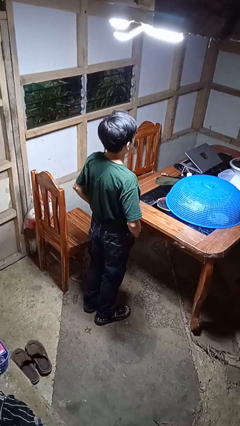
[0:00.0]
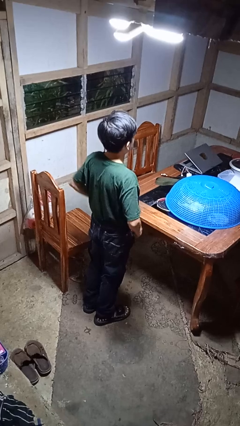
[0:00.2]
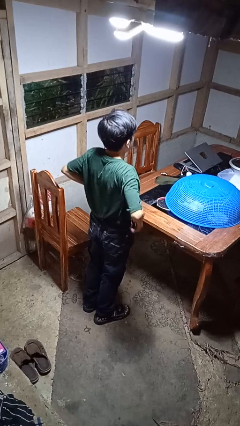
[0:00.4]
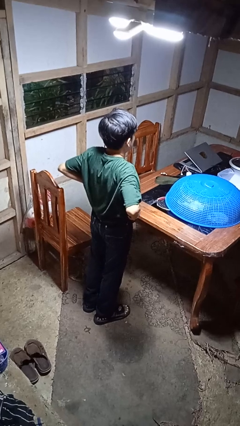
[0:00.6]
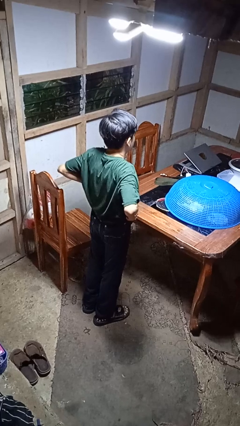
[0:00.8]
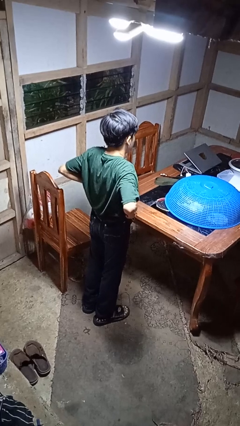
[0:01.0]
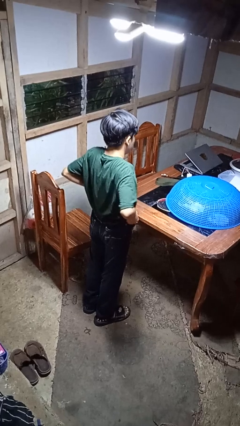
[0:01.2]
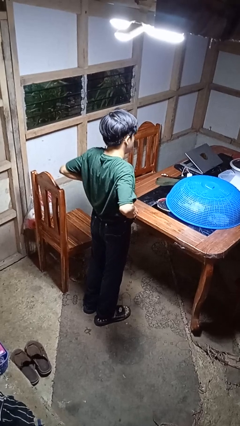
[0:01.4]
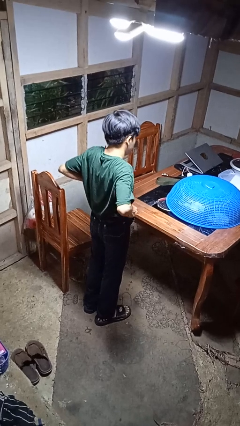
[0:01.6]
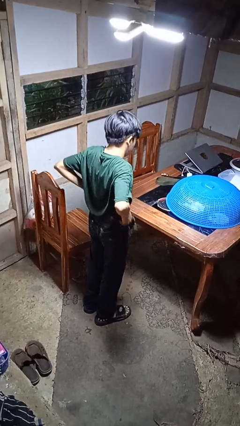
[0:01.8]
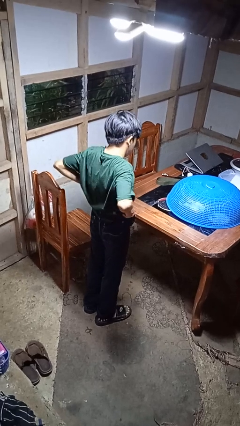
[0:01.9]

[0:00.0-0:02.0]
person hikes up pants

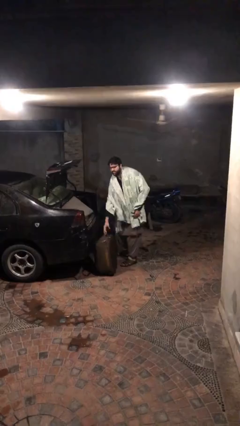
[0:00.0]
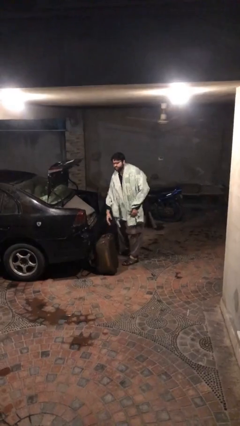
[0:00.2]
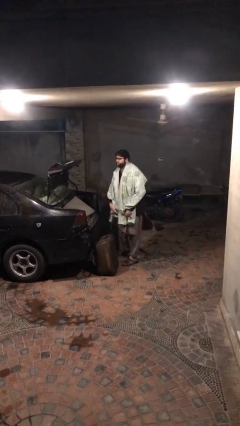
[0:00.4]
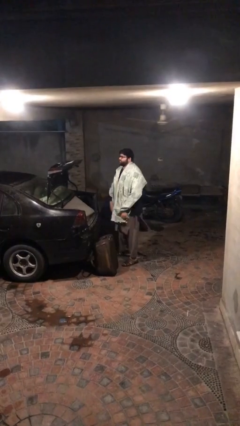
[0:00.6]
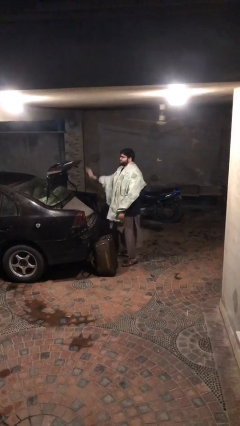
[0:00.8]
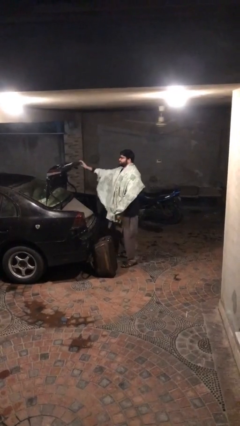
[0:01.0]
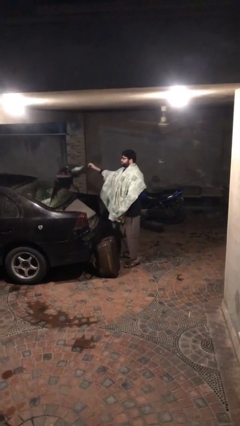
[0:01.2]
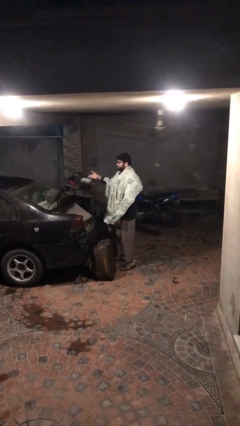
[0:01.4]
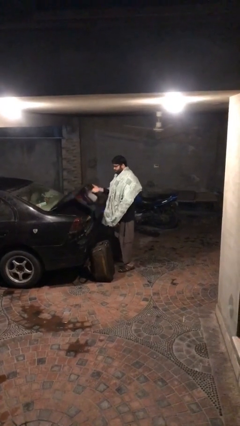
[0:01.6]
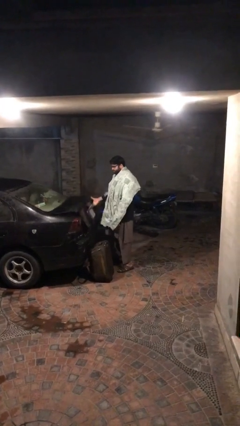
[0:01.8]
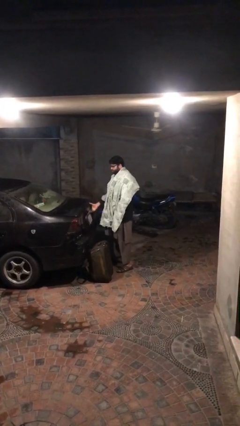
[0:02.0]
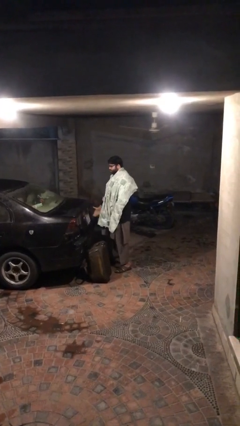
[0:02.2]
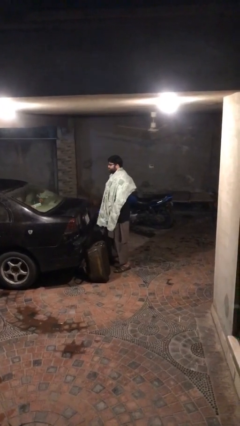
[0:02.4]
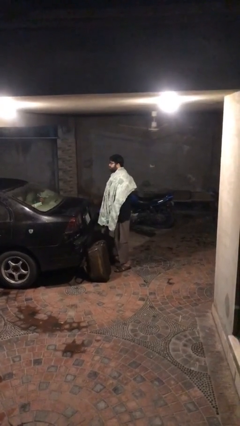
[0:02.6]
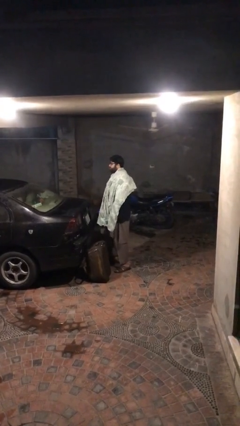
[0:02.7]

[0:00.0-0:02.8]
person closes car trunk

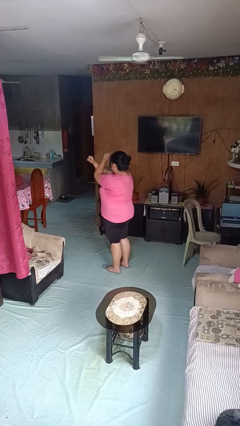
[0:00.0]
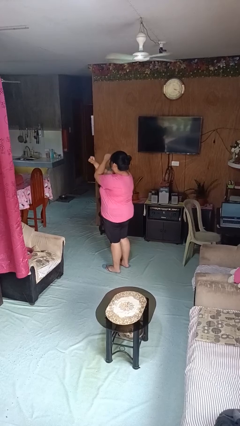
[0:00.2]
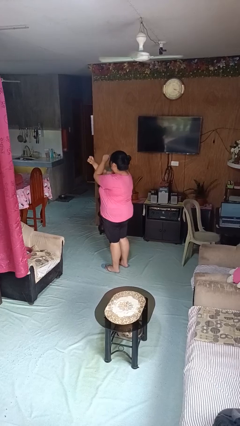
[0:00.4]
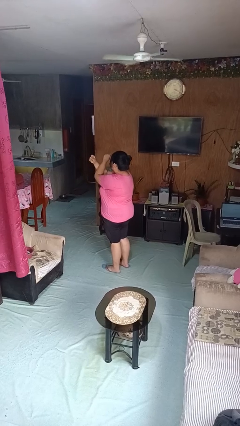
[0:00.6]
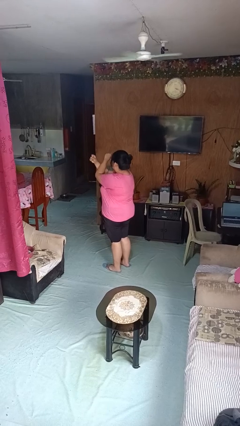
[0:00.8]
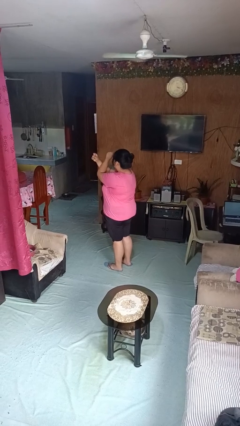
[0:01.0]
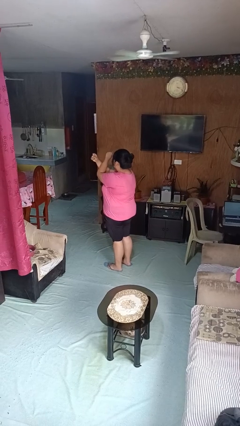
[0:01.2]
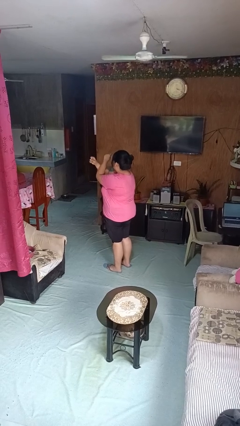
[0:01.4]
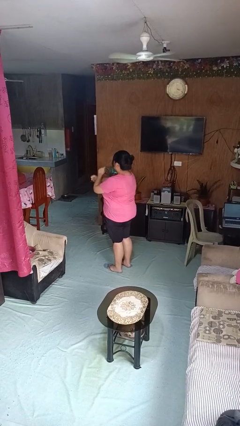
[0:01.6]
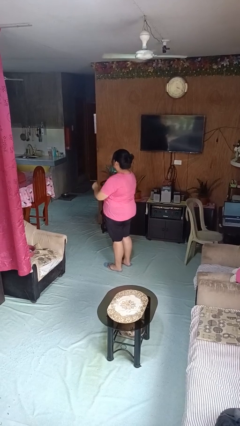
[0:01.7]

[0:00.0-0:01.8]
person gestures arms x

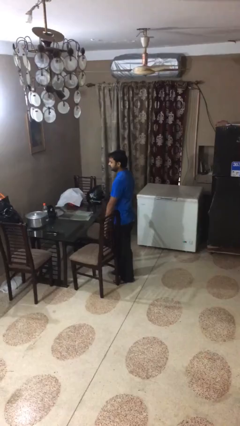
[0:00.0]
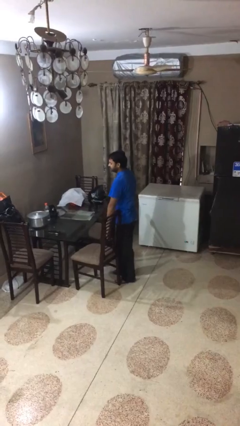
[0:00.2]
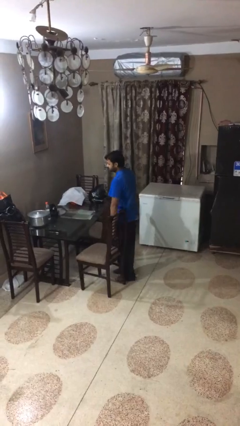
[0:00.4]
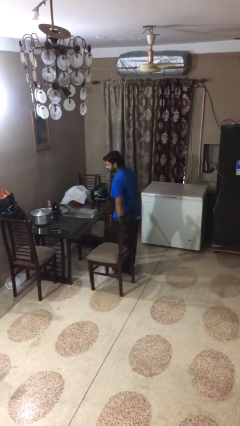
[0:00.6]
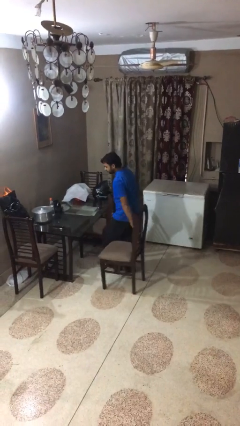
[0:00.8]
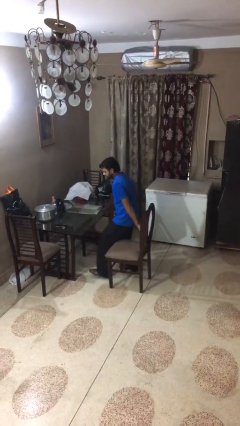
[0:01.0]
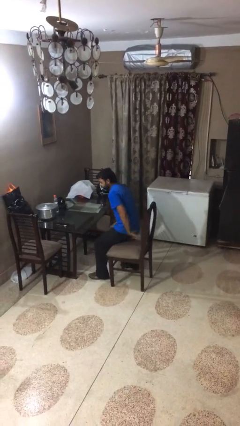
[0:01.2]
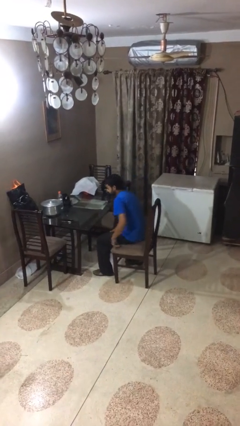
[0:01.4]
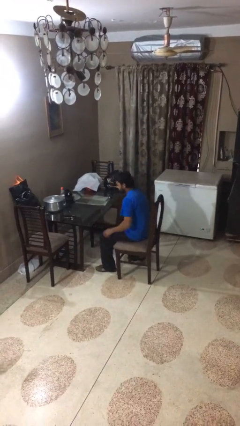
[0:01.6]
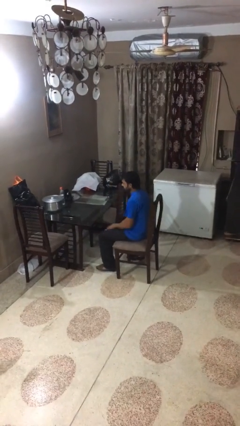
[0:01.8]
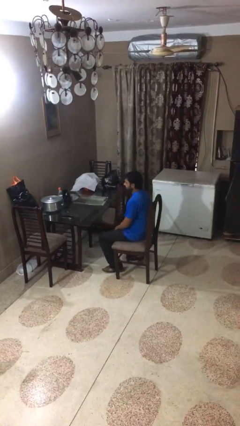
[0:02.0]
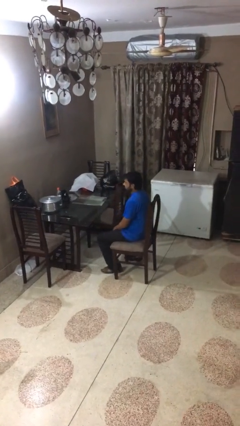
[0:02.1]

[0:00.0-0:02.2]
person sits down

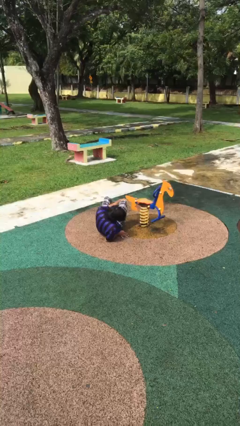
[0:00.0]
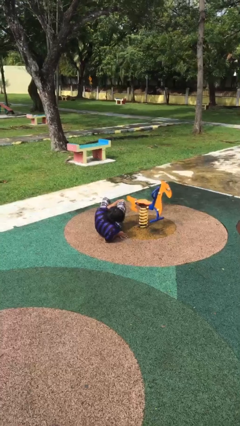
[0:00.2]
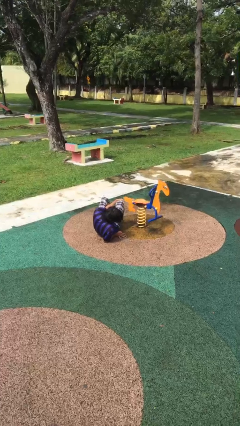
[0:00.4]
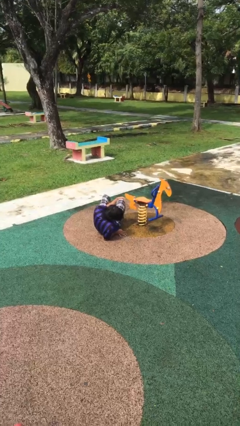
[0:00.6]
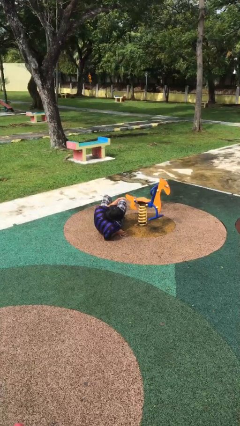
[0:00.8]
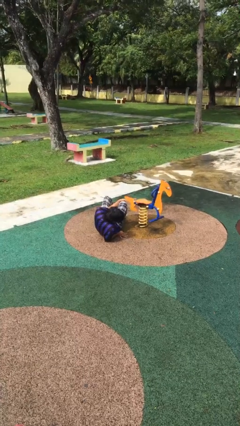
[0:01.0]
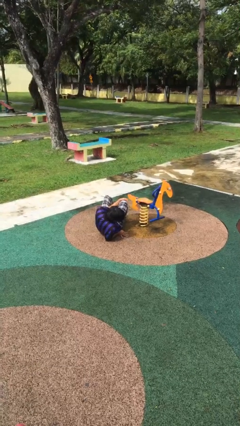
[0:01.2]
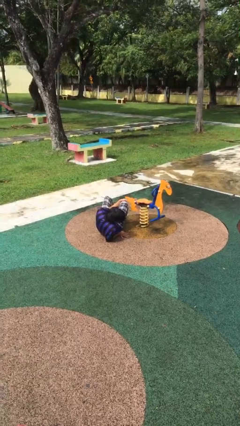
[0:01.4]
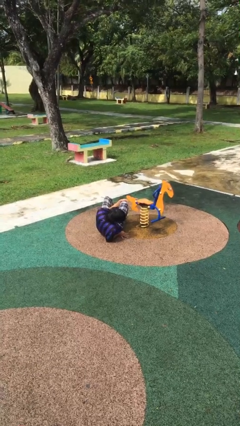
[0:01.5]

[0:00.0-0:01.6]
person lies down on floor

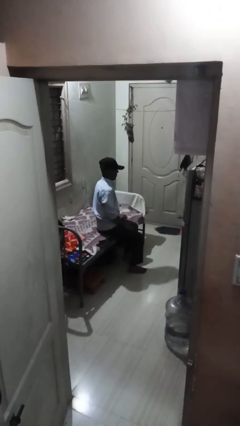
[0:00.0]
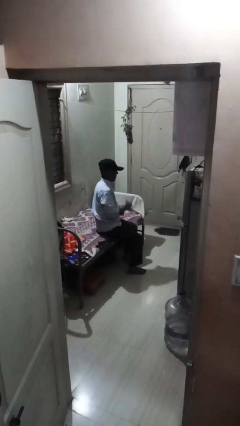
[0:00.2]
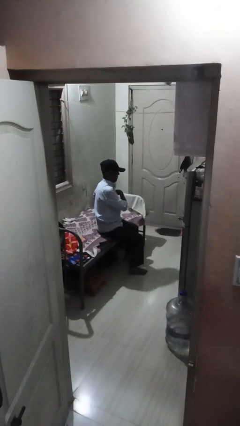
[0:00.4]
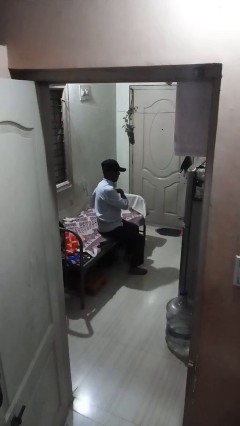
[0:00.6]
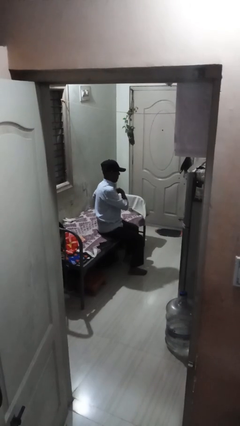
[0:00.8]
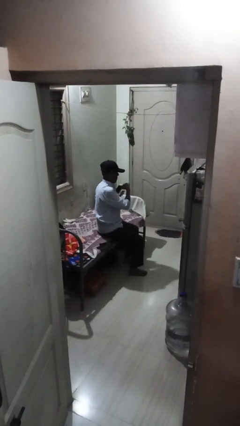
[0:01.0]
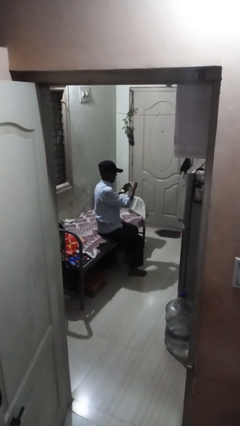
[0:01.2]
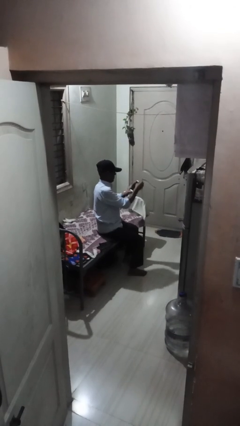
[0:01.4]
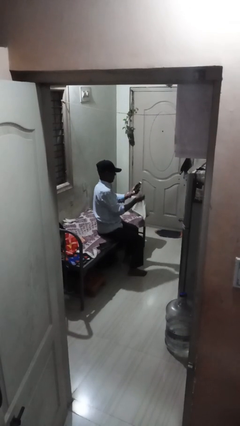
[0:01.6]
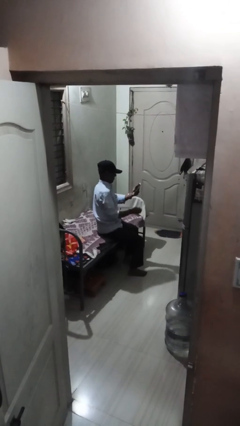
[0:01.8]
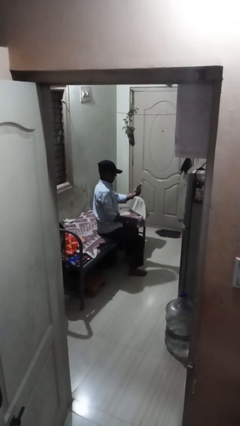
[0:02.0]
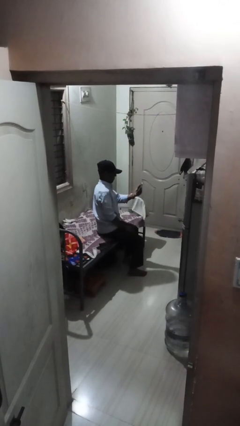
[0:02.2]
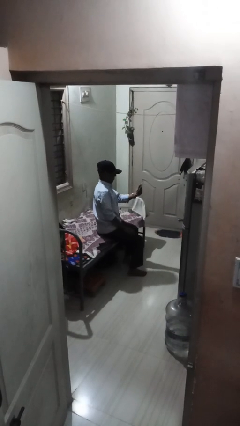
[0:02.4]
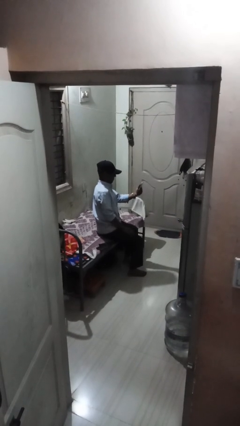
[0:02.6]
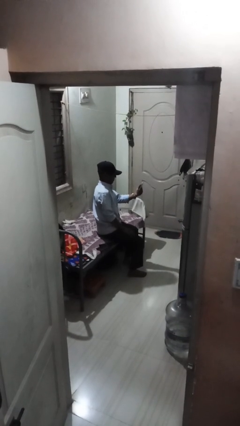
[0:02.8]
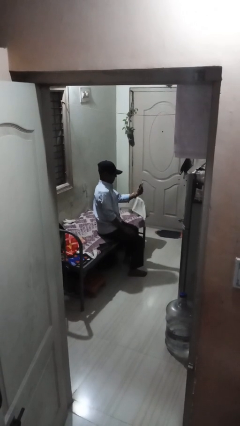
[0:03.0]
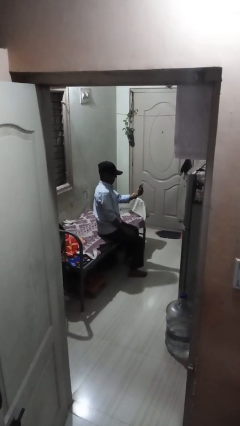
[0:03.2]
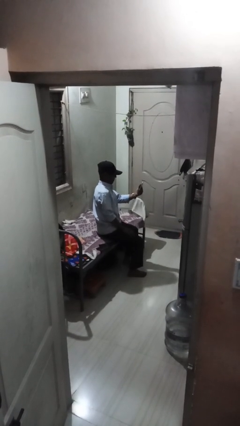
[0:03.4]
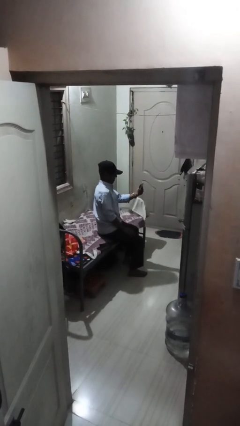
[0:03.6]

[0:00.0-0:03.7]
person takes phone from pocket

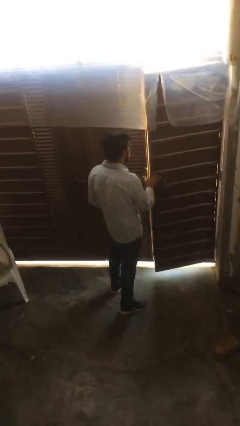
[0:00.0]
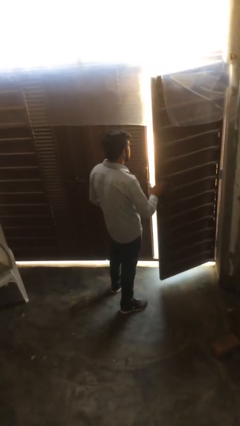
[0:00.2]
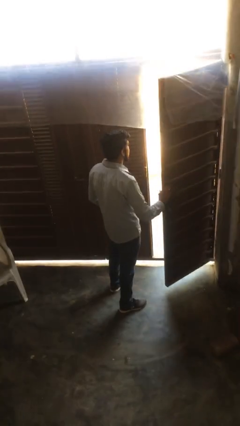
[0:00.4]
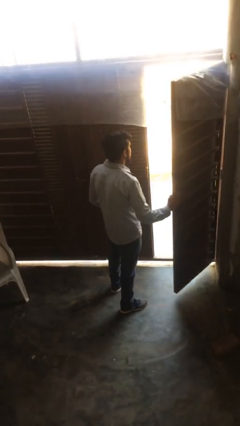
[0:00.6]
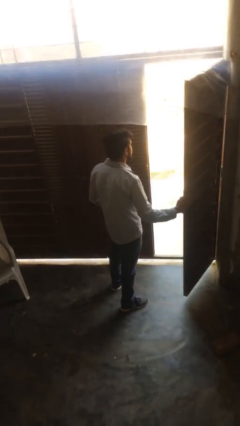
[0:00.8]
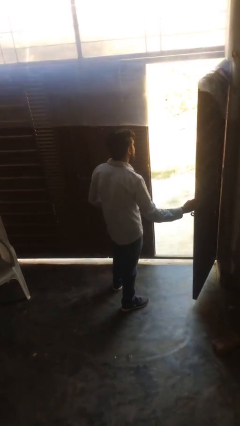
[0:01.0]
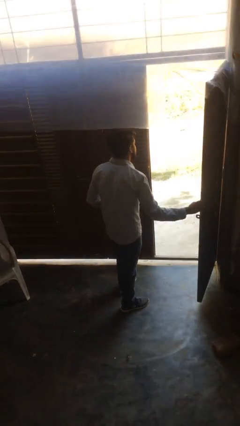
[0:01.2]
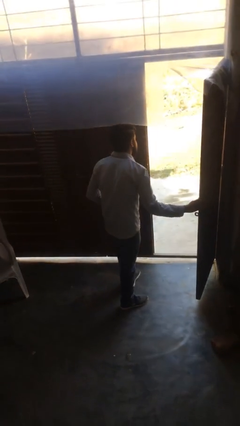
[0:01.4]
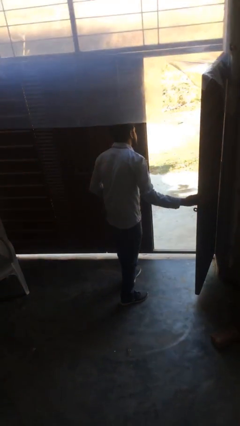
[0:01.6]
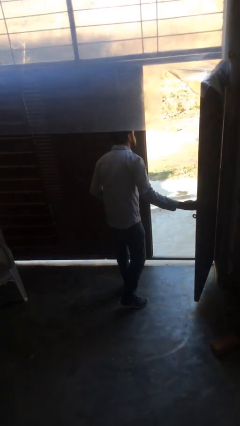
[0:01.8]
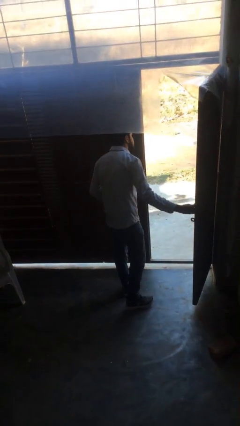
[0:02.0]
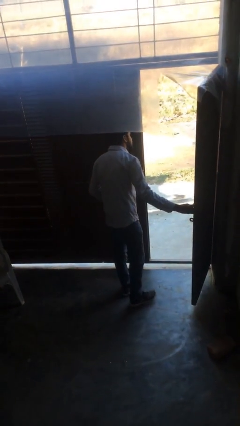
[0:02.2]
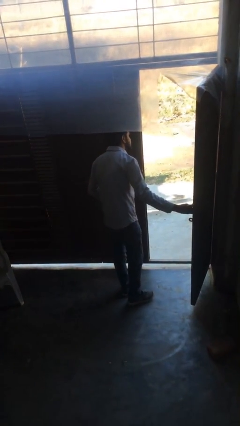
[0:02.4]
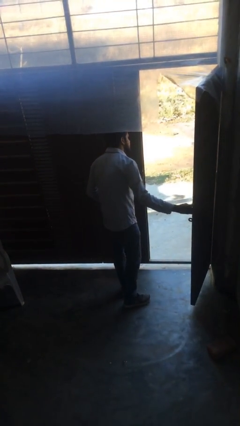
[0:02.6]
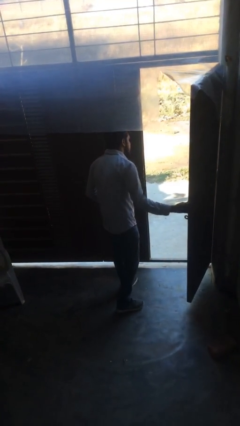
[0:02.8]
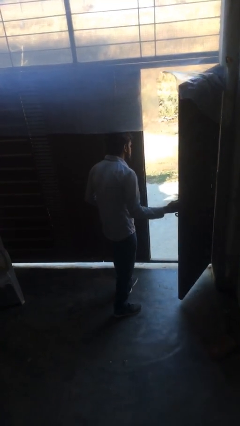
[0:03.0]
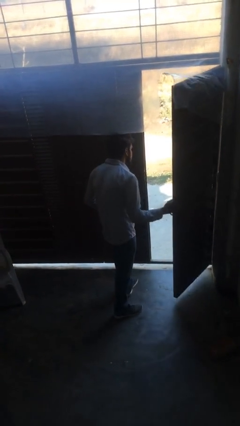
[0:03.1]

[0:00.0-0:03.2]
person opens facility door
